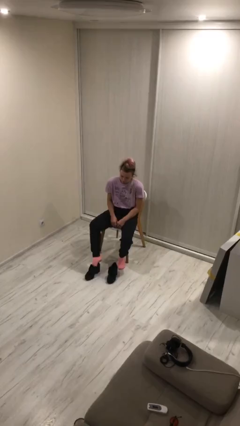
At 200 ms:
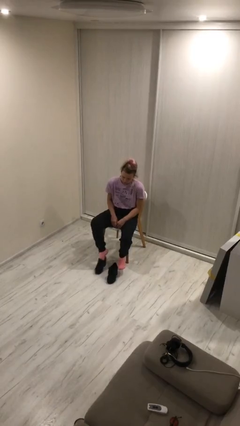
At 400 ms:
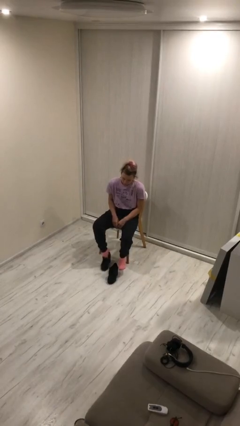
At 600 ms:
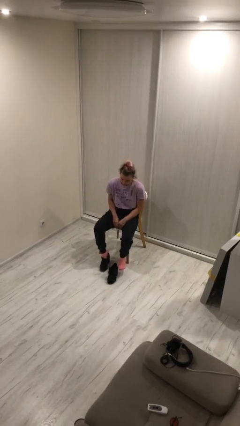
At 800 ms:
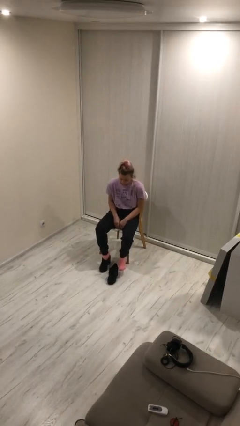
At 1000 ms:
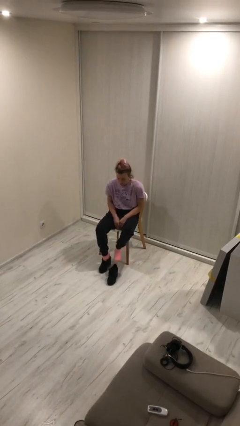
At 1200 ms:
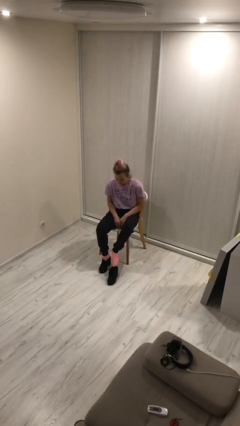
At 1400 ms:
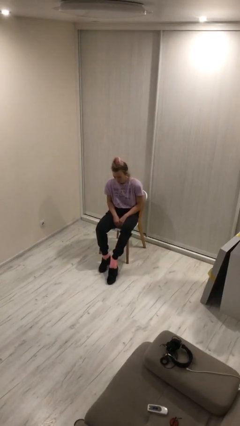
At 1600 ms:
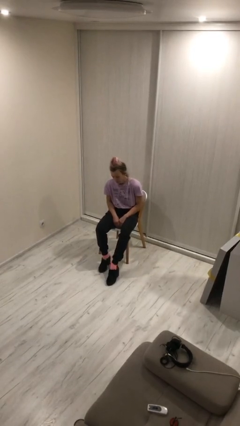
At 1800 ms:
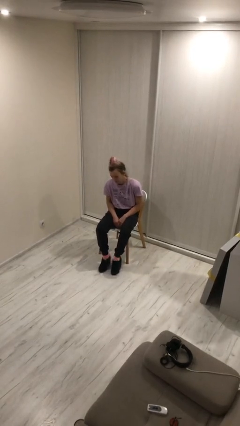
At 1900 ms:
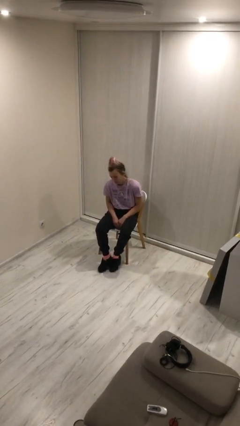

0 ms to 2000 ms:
person puts on shoes

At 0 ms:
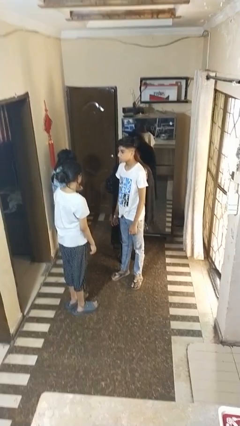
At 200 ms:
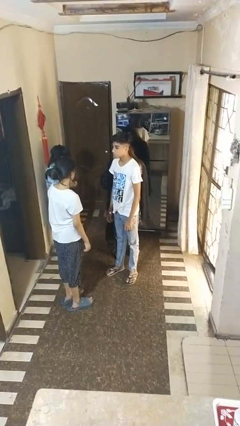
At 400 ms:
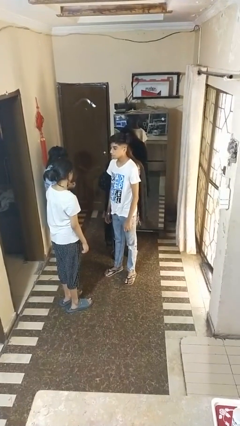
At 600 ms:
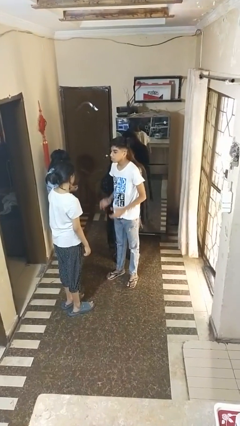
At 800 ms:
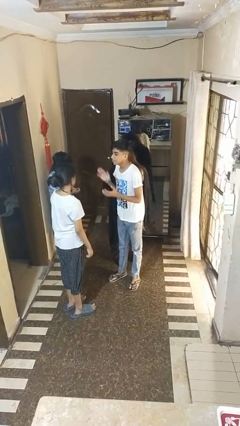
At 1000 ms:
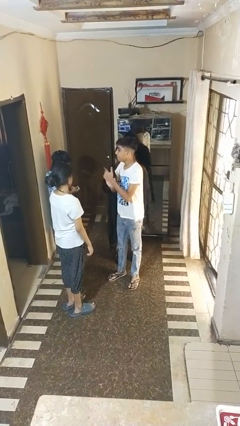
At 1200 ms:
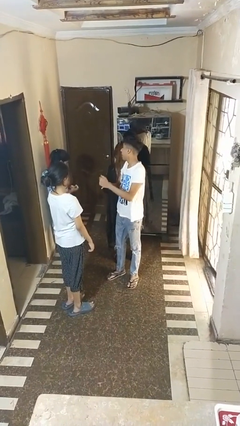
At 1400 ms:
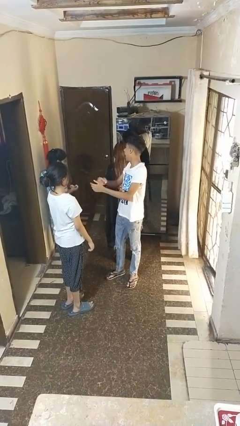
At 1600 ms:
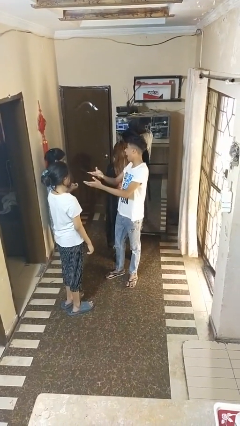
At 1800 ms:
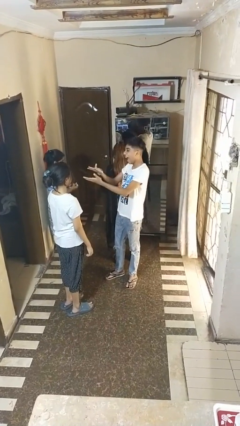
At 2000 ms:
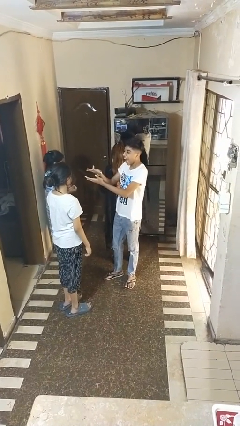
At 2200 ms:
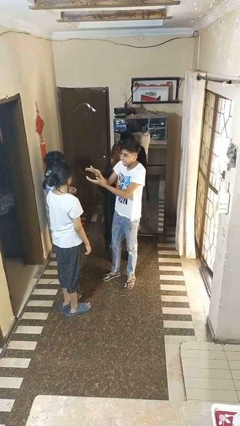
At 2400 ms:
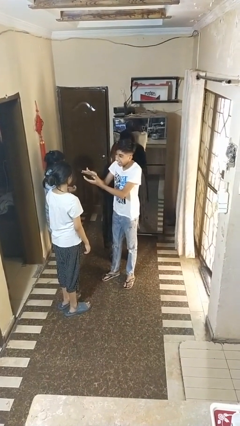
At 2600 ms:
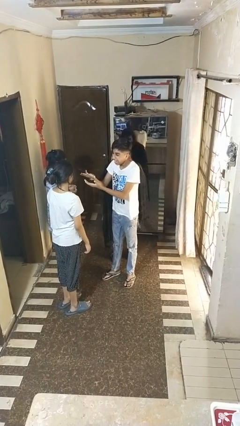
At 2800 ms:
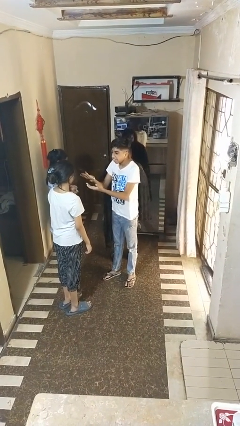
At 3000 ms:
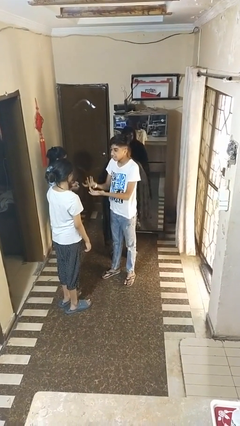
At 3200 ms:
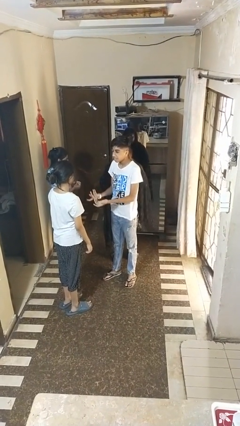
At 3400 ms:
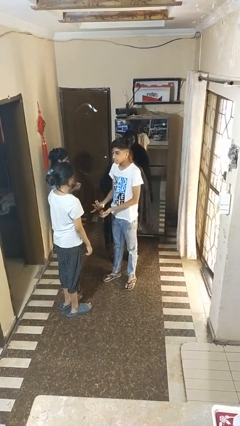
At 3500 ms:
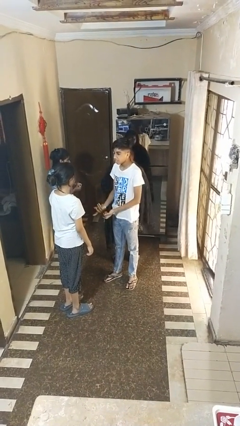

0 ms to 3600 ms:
person laughs with person

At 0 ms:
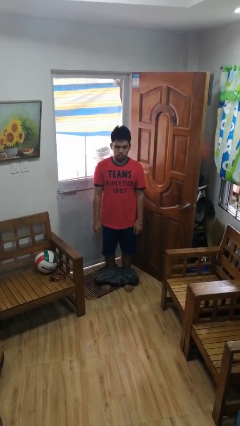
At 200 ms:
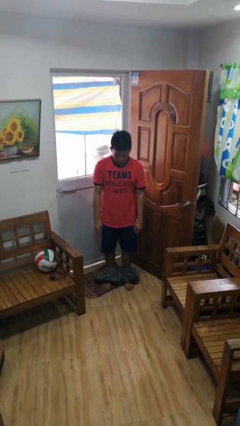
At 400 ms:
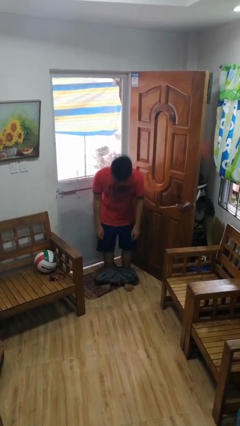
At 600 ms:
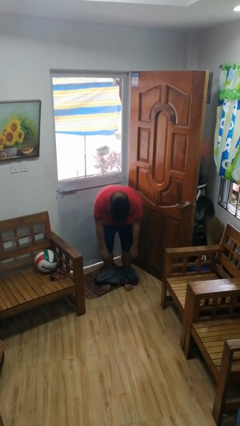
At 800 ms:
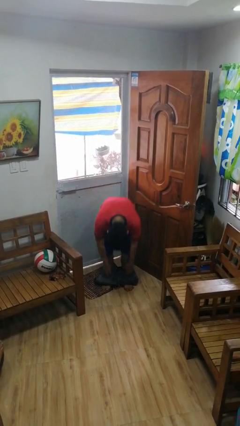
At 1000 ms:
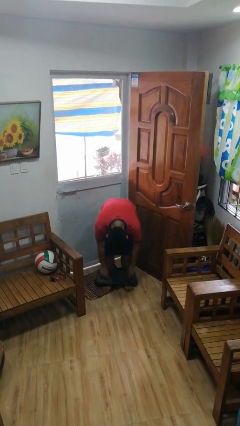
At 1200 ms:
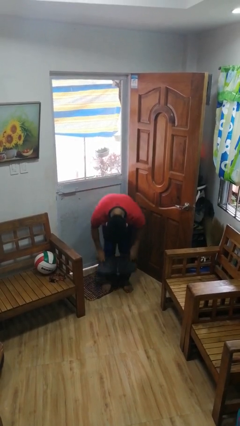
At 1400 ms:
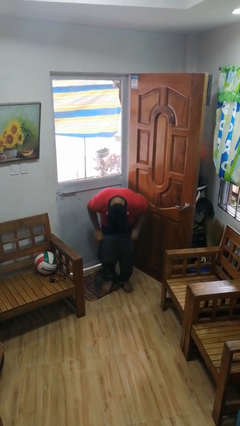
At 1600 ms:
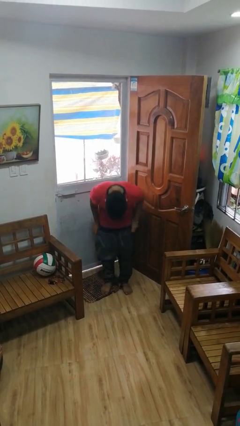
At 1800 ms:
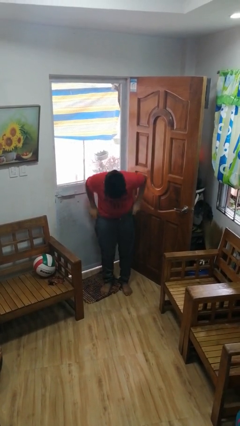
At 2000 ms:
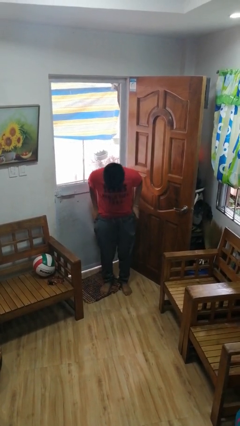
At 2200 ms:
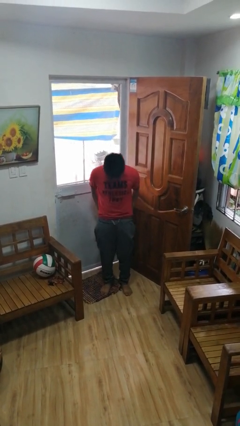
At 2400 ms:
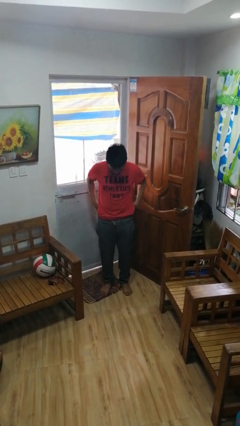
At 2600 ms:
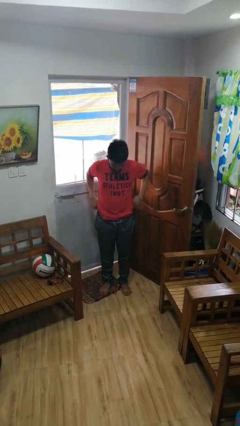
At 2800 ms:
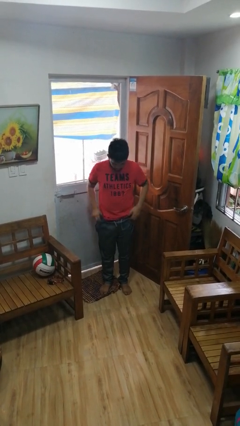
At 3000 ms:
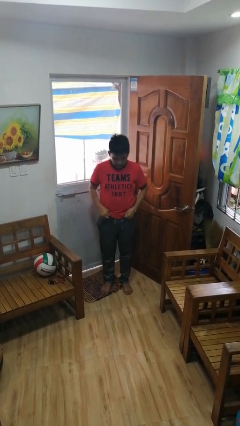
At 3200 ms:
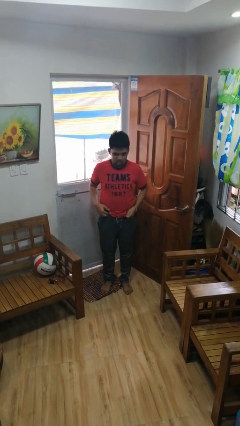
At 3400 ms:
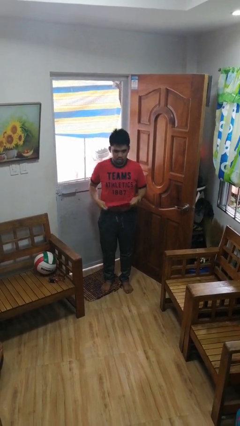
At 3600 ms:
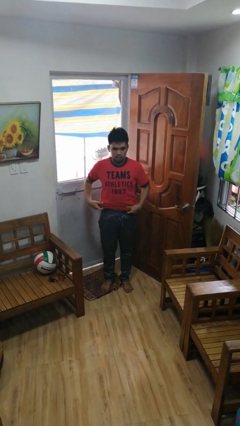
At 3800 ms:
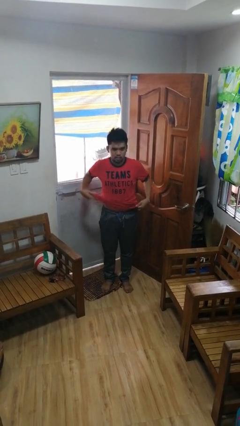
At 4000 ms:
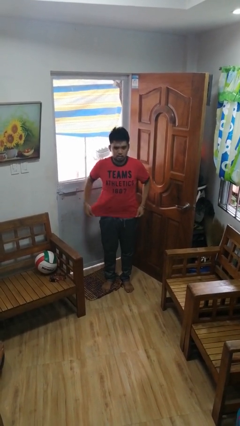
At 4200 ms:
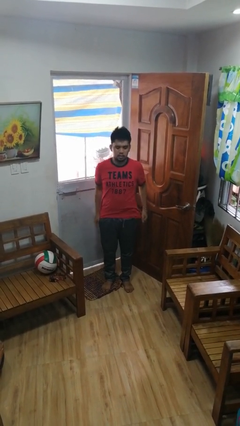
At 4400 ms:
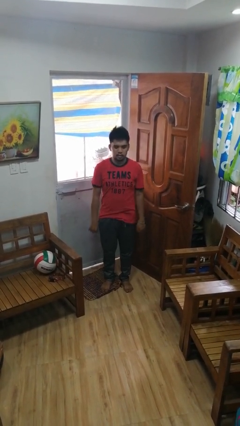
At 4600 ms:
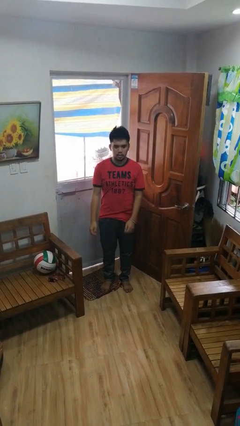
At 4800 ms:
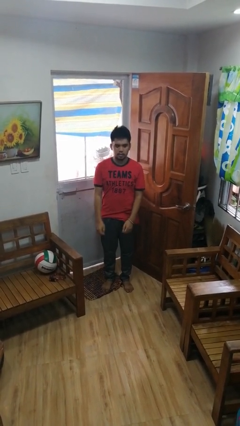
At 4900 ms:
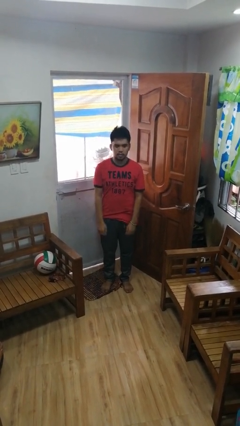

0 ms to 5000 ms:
person puts on pants

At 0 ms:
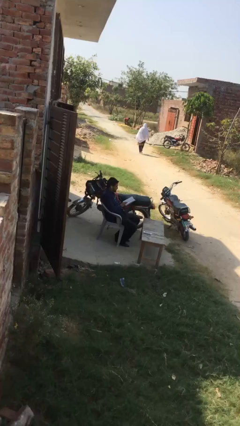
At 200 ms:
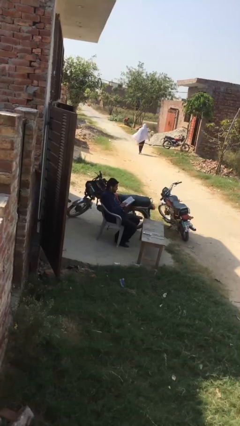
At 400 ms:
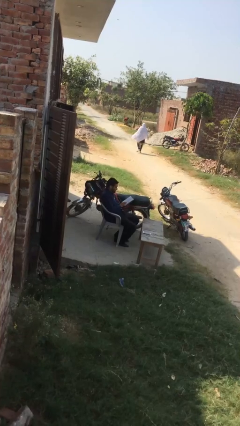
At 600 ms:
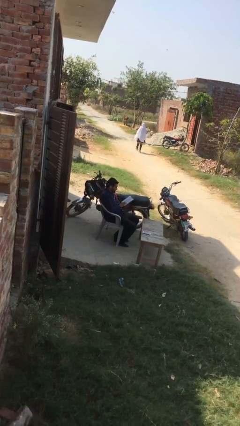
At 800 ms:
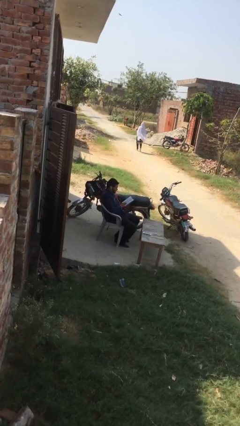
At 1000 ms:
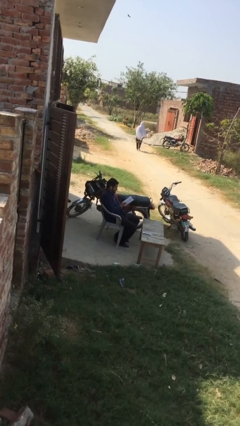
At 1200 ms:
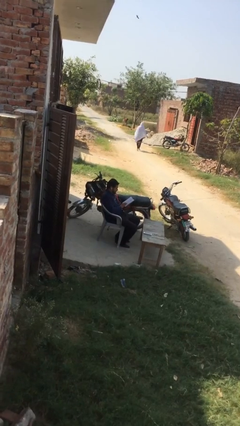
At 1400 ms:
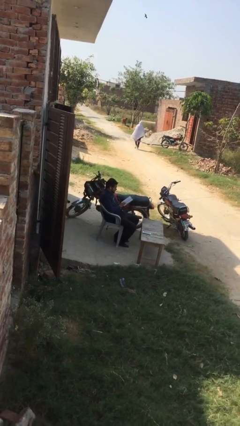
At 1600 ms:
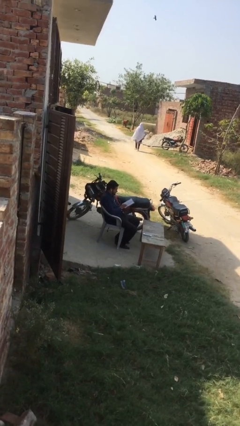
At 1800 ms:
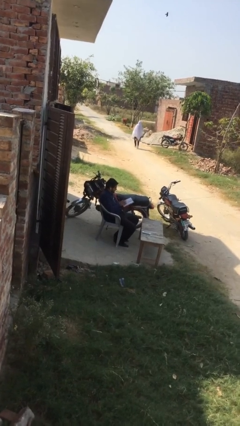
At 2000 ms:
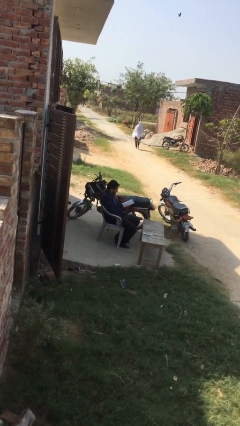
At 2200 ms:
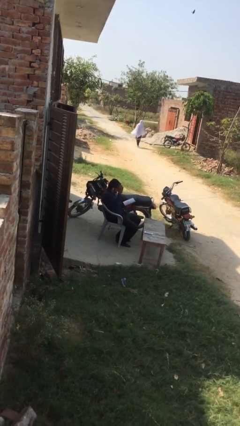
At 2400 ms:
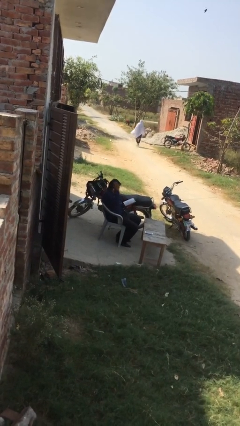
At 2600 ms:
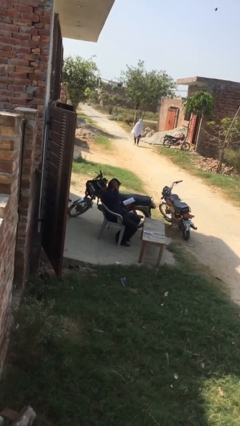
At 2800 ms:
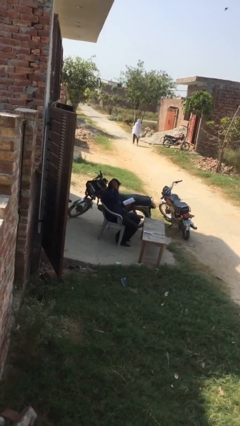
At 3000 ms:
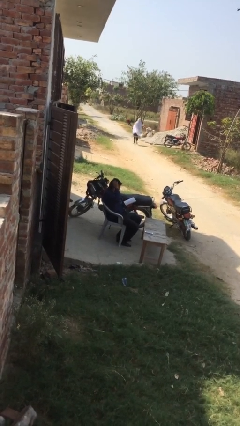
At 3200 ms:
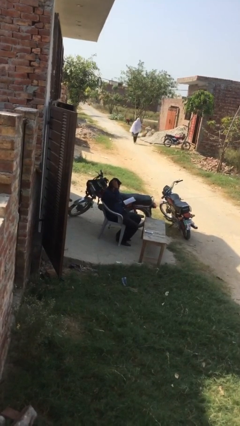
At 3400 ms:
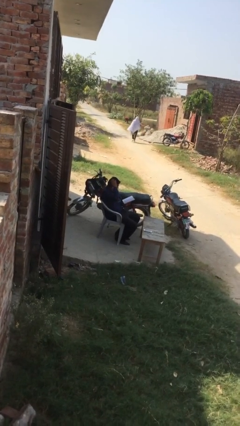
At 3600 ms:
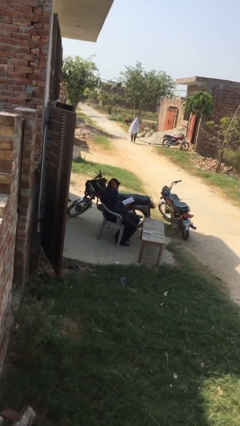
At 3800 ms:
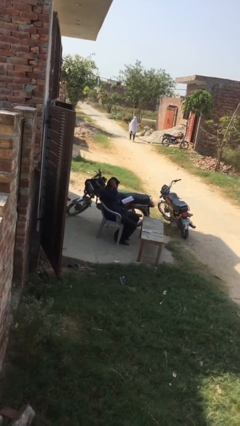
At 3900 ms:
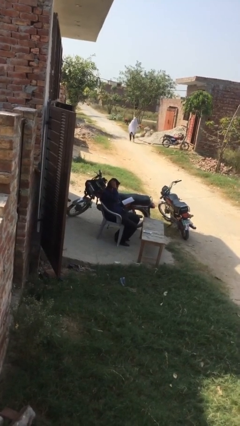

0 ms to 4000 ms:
person reads document

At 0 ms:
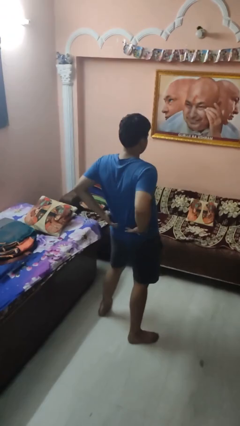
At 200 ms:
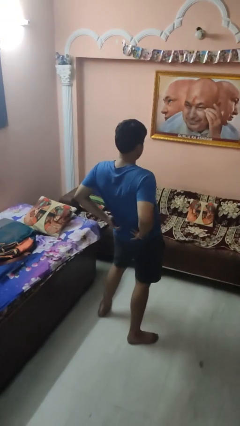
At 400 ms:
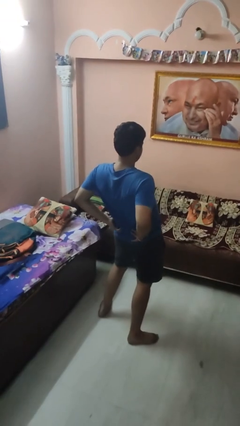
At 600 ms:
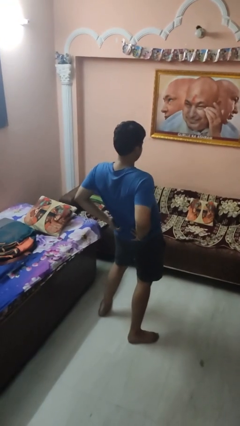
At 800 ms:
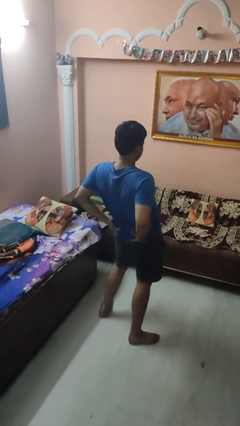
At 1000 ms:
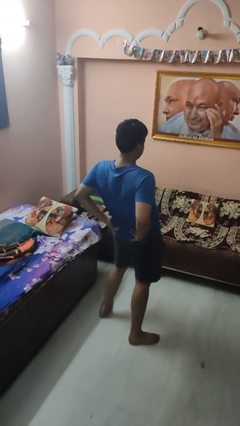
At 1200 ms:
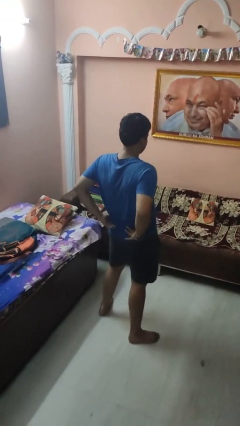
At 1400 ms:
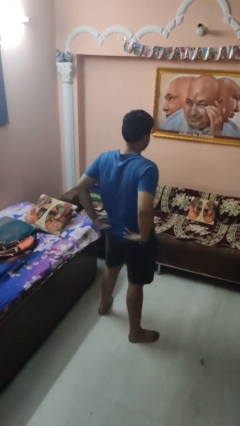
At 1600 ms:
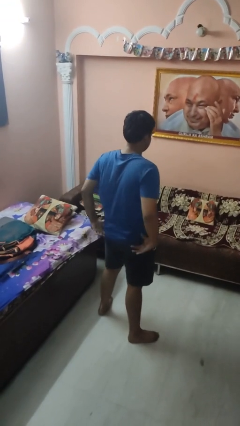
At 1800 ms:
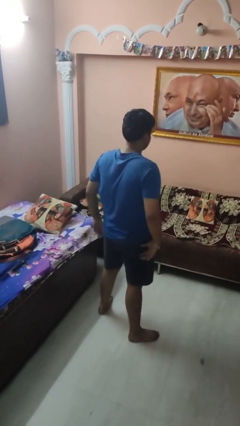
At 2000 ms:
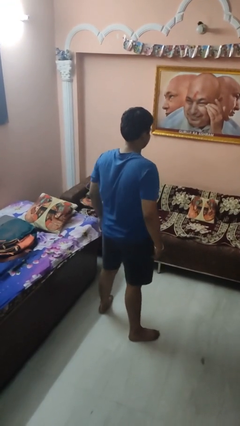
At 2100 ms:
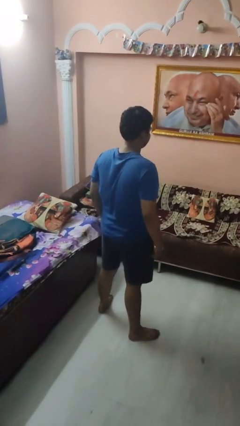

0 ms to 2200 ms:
person stretches back
